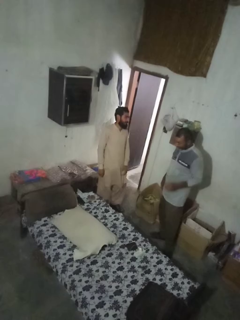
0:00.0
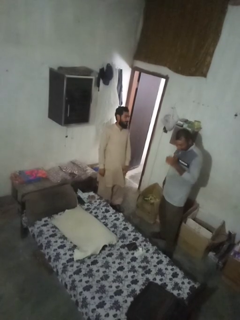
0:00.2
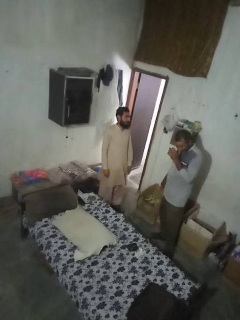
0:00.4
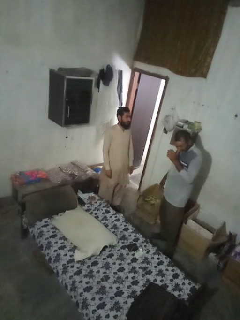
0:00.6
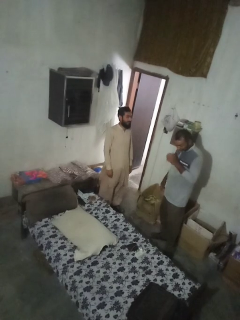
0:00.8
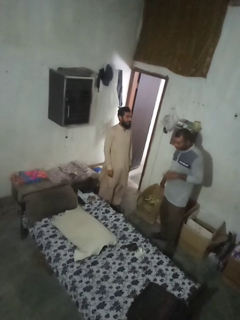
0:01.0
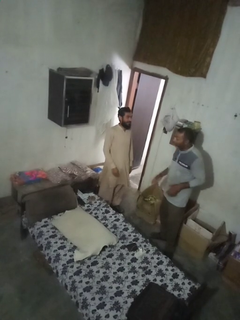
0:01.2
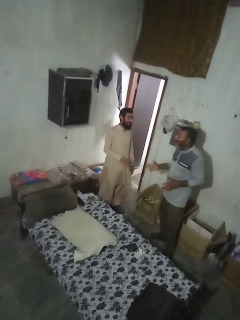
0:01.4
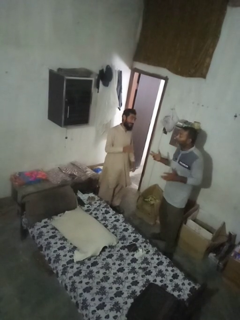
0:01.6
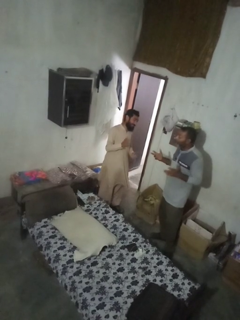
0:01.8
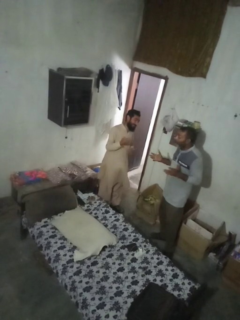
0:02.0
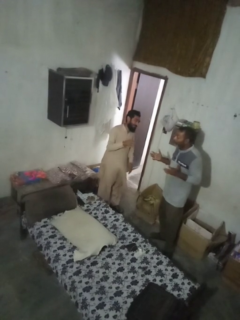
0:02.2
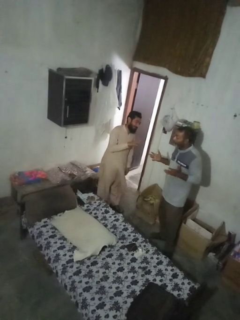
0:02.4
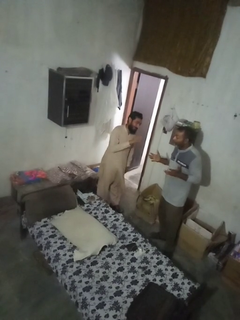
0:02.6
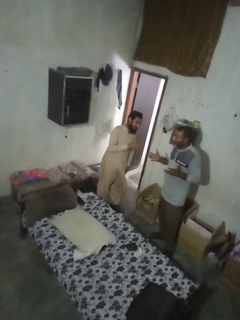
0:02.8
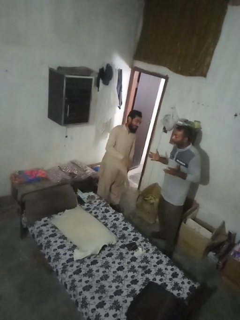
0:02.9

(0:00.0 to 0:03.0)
person laughs with person

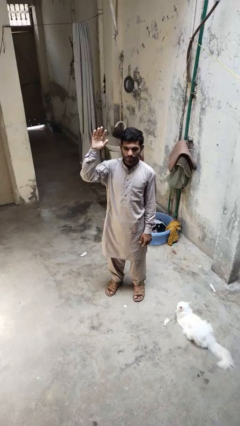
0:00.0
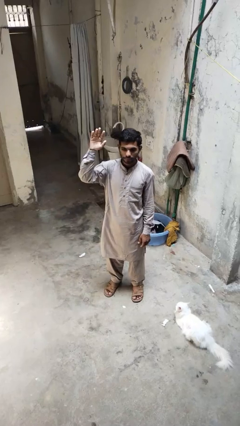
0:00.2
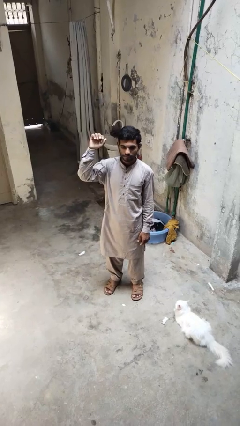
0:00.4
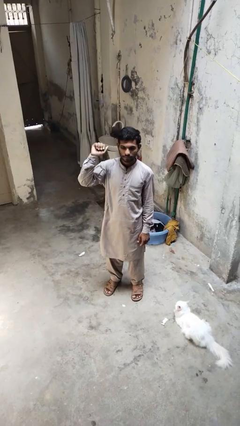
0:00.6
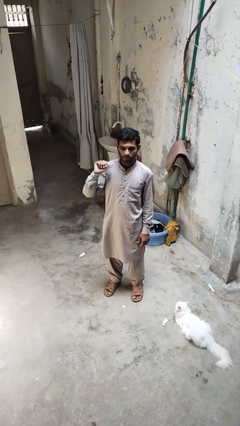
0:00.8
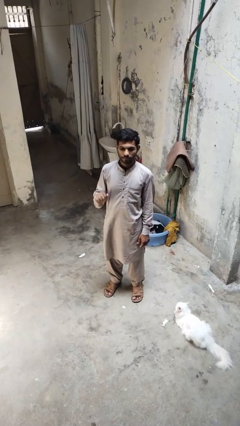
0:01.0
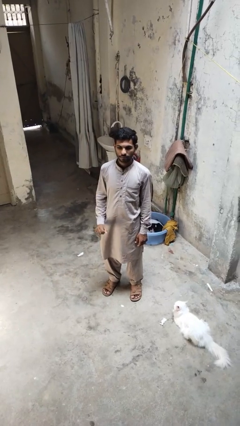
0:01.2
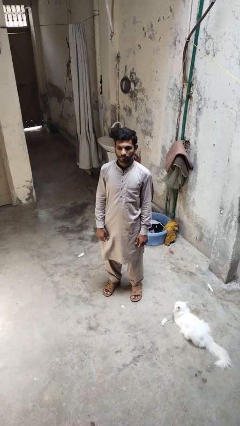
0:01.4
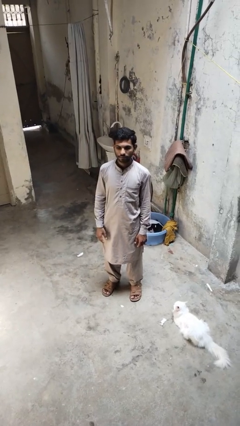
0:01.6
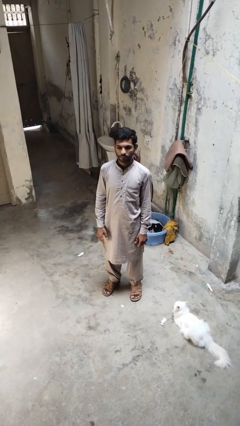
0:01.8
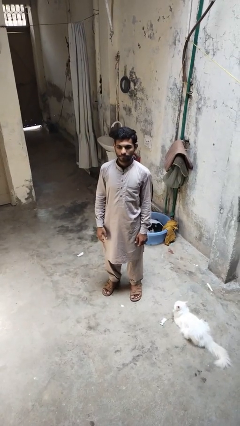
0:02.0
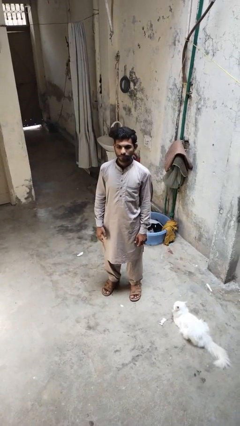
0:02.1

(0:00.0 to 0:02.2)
person gestures lower hand

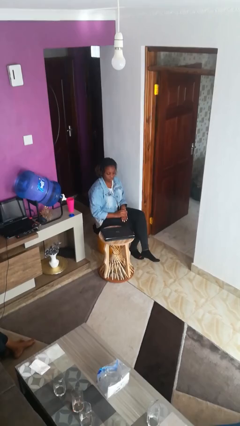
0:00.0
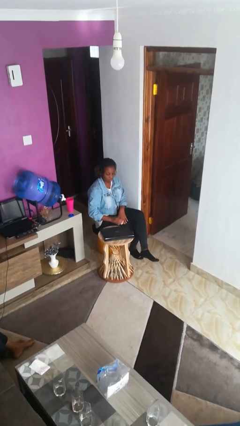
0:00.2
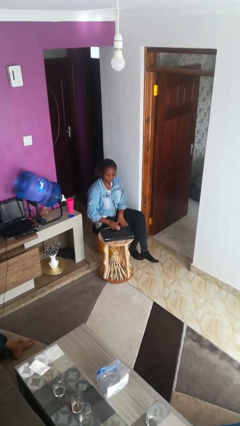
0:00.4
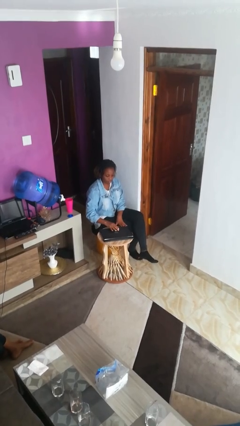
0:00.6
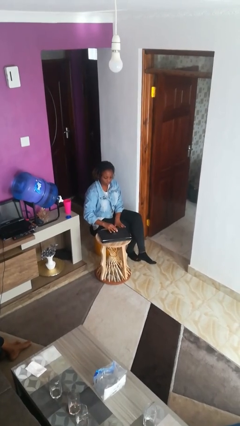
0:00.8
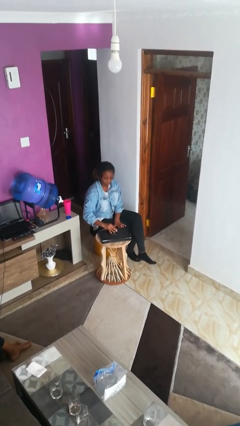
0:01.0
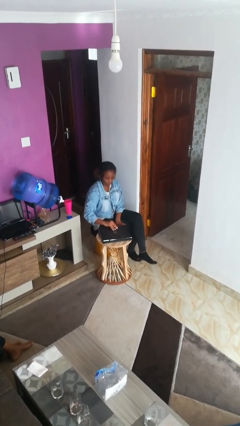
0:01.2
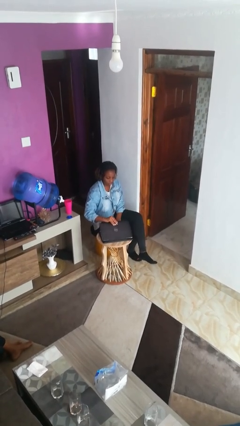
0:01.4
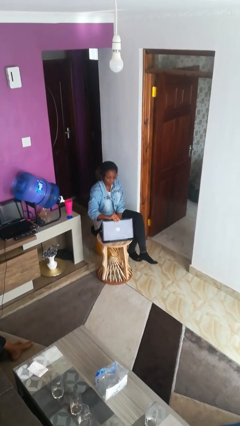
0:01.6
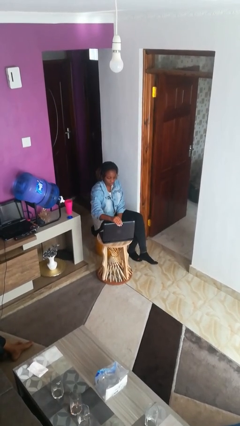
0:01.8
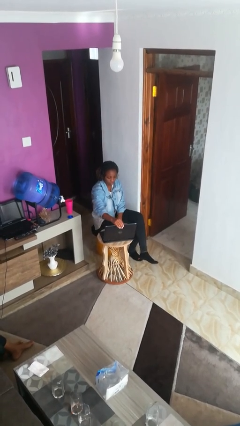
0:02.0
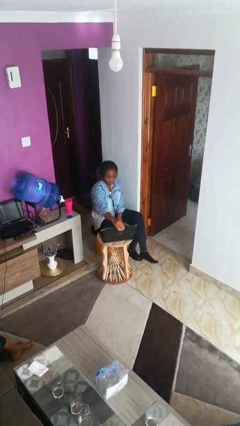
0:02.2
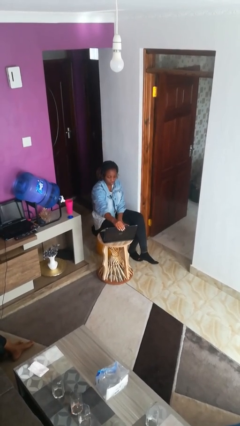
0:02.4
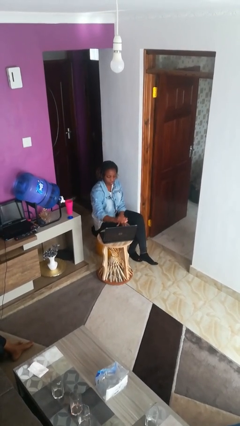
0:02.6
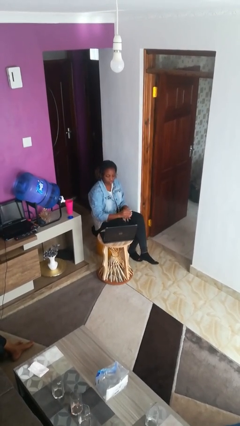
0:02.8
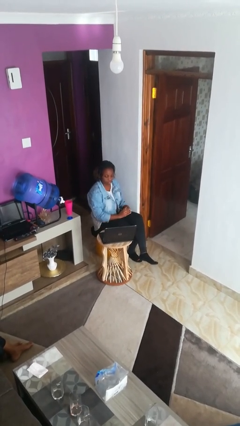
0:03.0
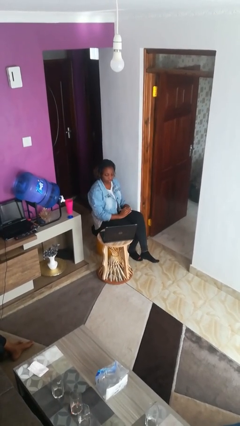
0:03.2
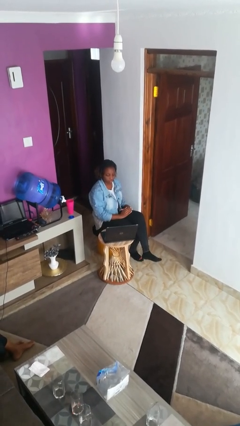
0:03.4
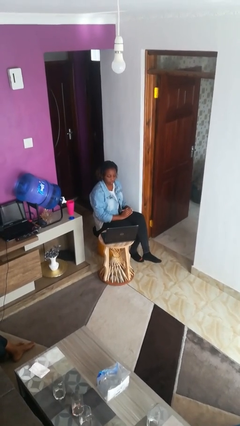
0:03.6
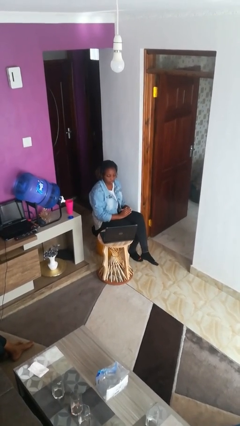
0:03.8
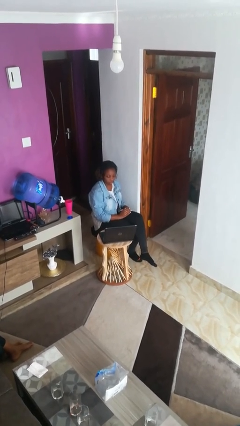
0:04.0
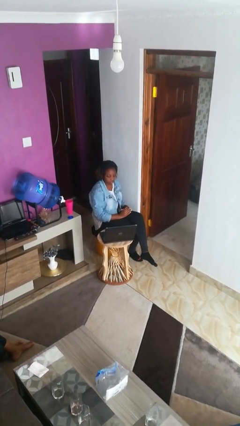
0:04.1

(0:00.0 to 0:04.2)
person opens laptop

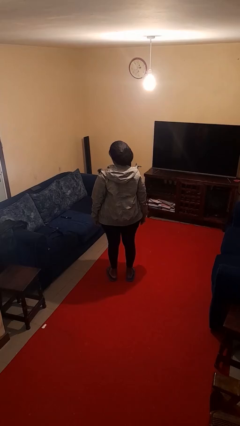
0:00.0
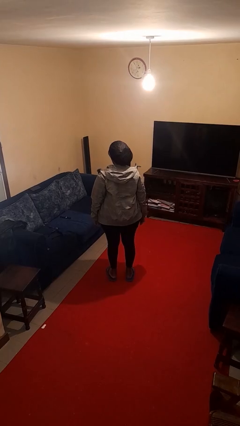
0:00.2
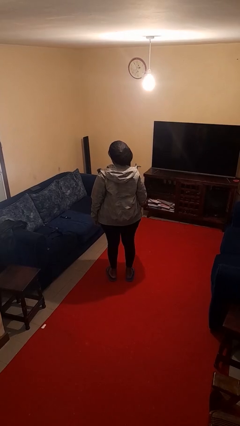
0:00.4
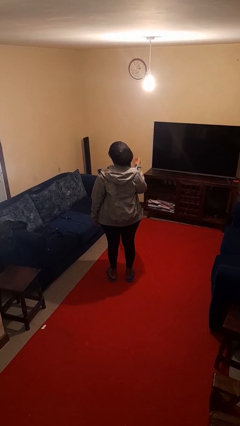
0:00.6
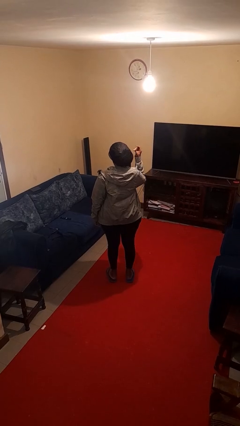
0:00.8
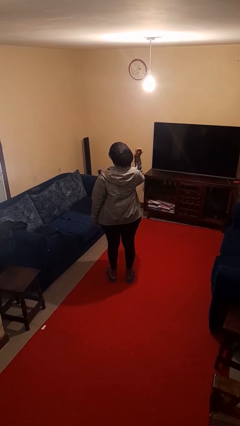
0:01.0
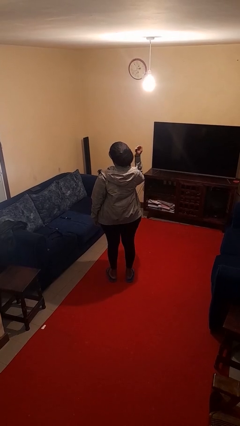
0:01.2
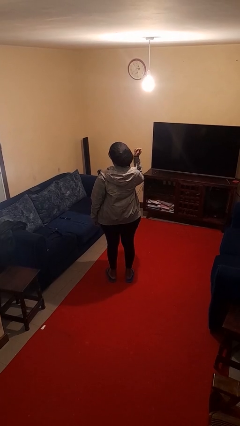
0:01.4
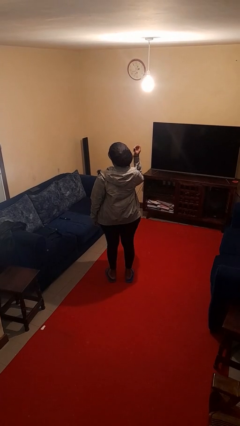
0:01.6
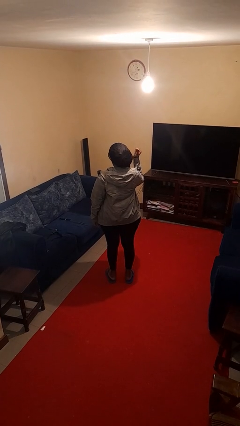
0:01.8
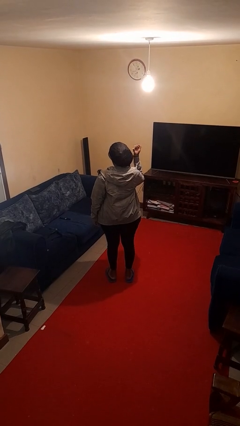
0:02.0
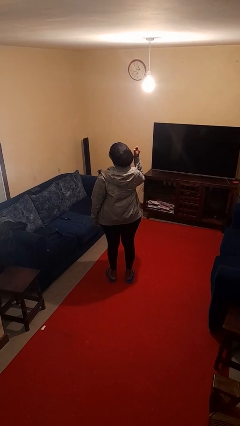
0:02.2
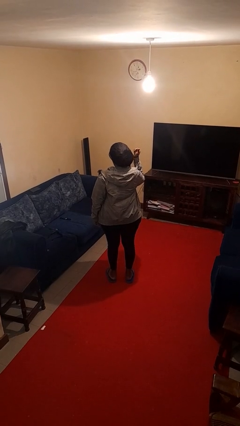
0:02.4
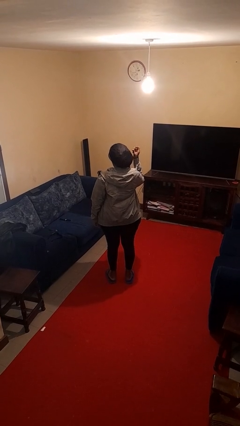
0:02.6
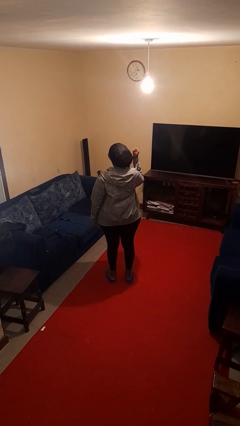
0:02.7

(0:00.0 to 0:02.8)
person snaps fingers

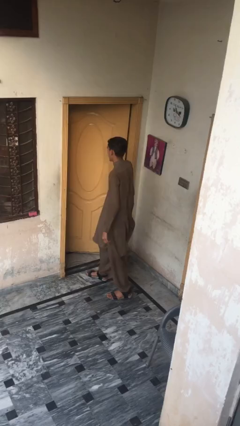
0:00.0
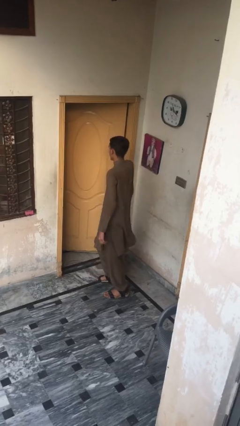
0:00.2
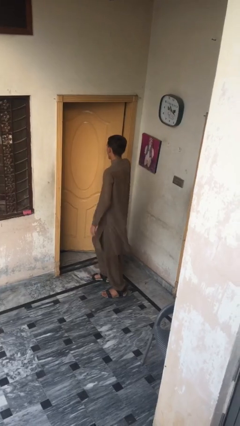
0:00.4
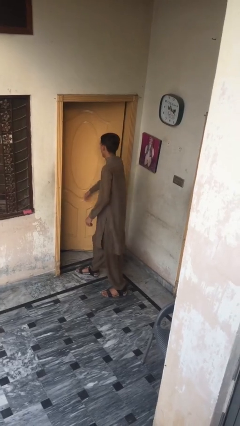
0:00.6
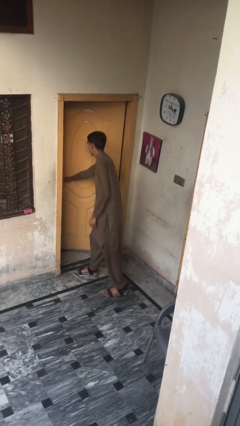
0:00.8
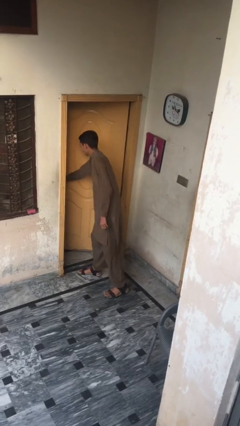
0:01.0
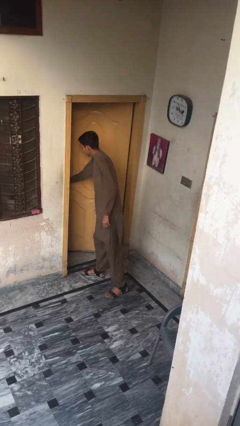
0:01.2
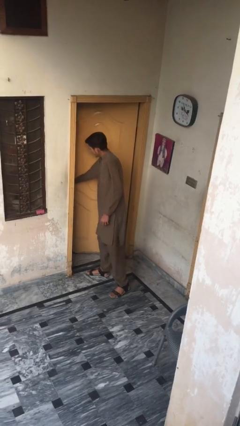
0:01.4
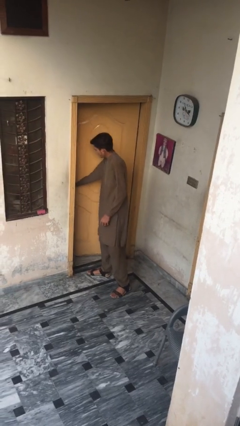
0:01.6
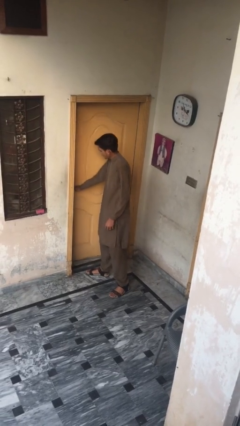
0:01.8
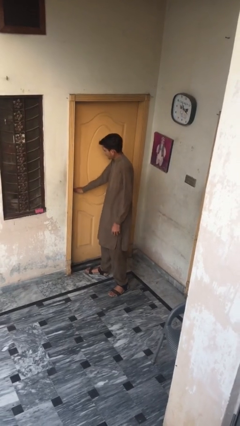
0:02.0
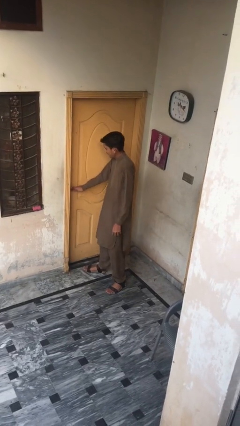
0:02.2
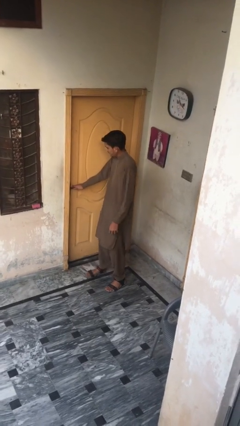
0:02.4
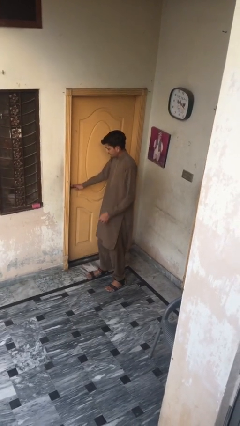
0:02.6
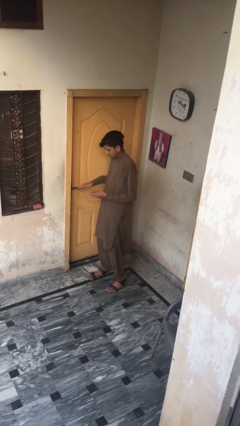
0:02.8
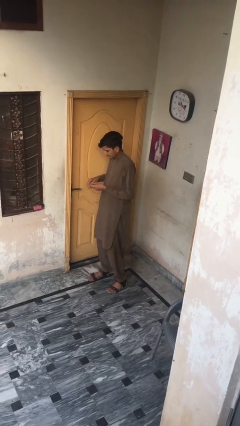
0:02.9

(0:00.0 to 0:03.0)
person closes facility door

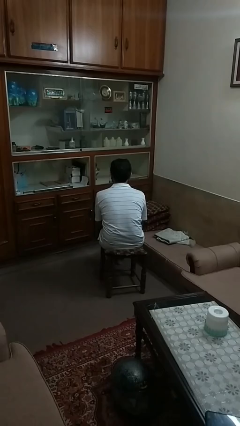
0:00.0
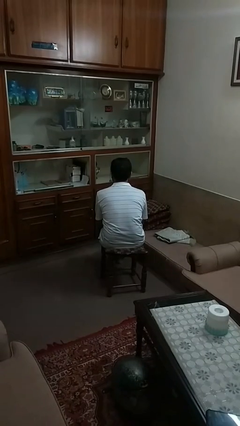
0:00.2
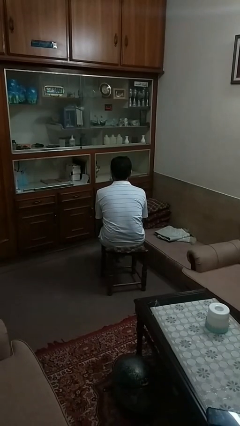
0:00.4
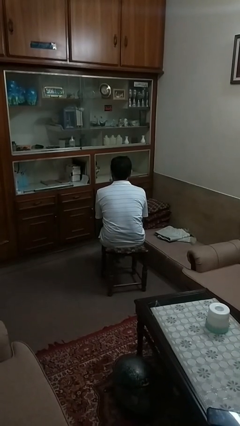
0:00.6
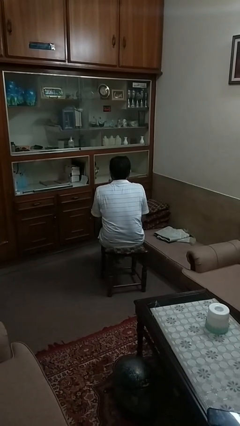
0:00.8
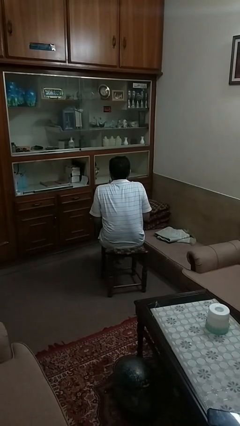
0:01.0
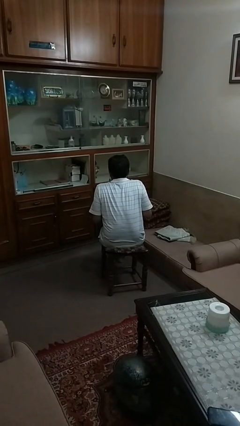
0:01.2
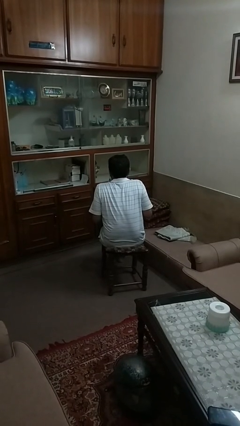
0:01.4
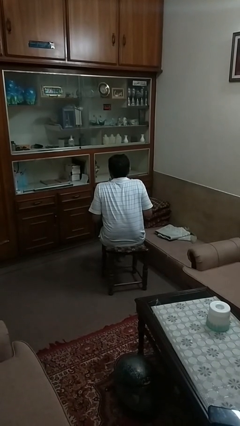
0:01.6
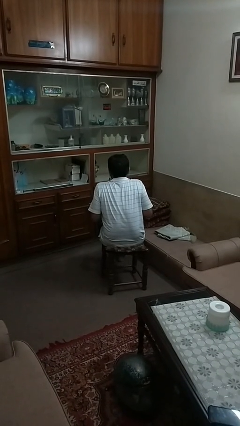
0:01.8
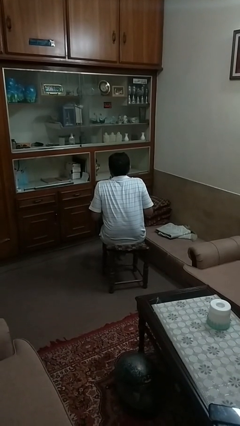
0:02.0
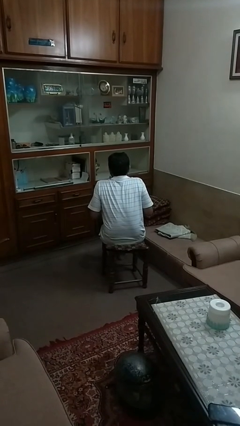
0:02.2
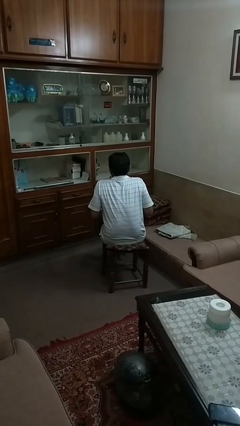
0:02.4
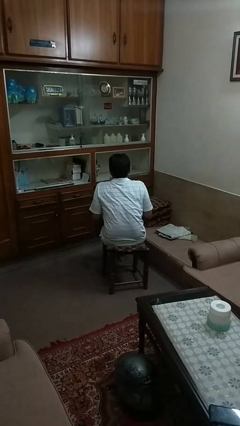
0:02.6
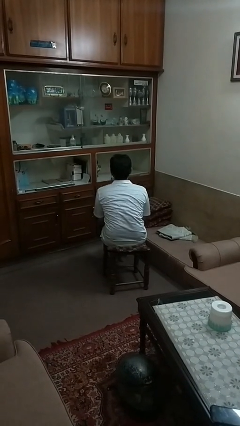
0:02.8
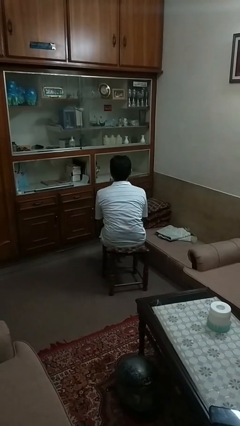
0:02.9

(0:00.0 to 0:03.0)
person shrugs
